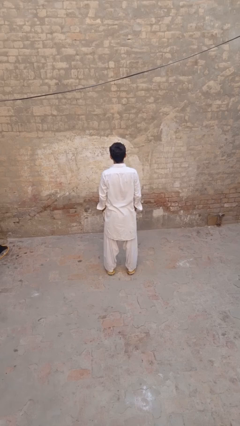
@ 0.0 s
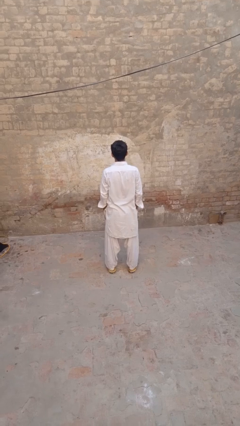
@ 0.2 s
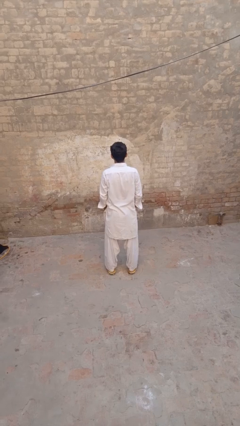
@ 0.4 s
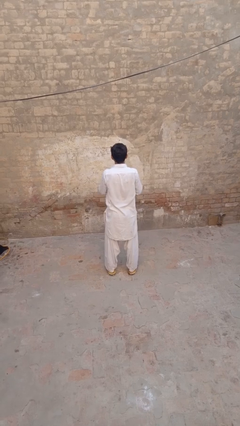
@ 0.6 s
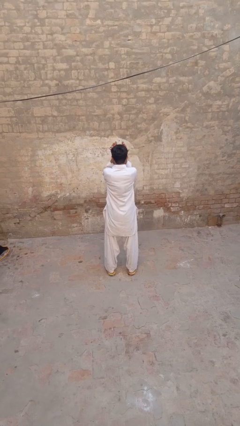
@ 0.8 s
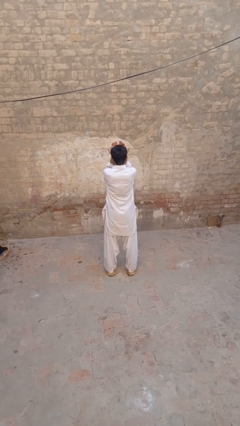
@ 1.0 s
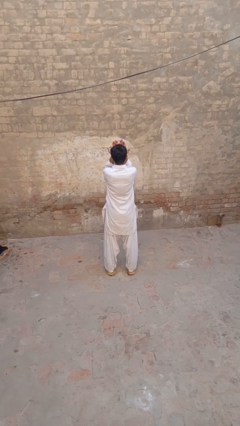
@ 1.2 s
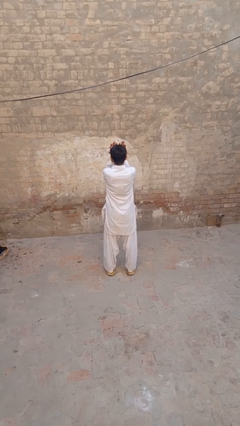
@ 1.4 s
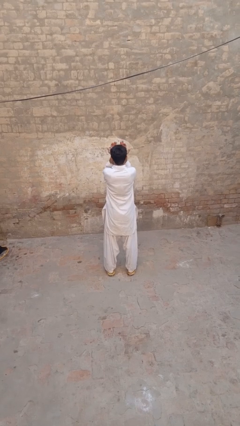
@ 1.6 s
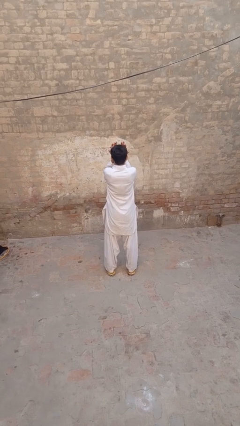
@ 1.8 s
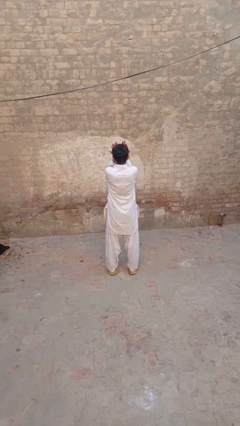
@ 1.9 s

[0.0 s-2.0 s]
person shades eyes

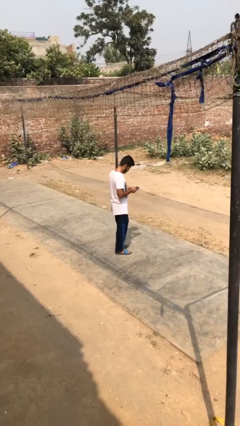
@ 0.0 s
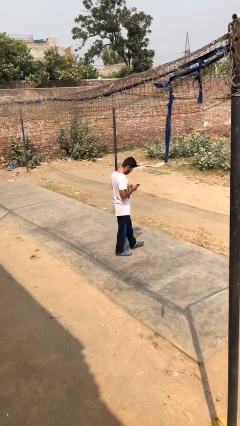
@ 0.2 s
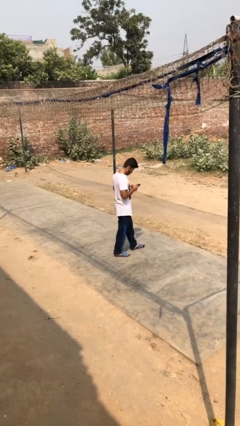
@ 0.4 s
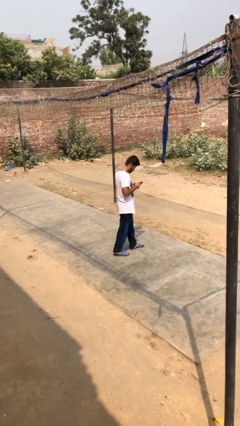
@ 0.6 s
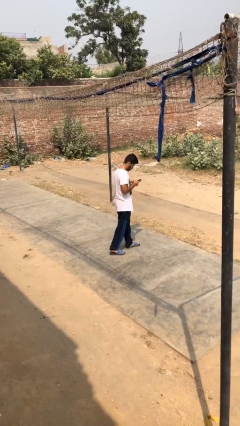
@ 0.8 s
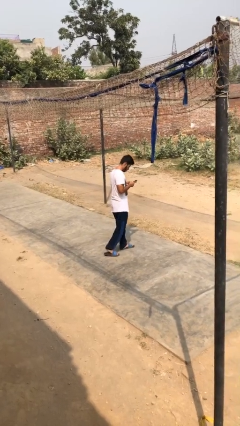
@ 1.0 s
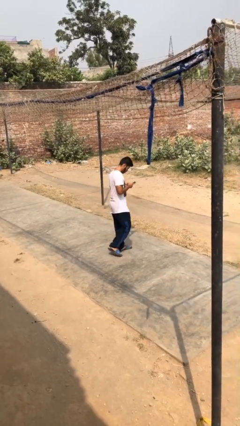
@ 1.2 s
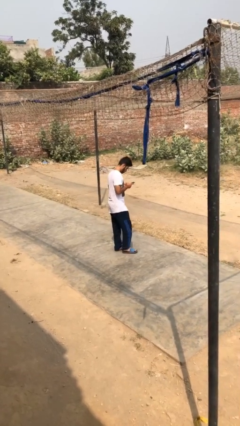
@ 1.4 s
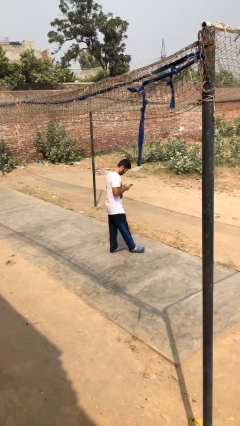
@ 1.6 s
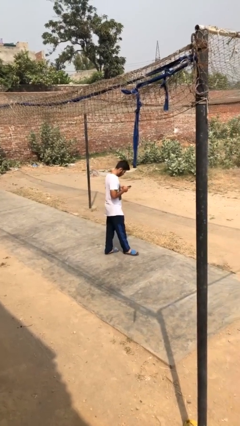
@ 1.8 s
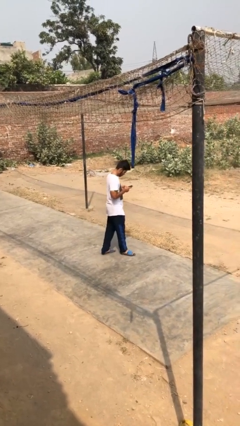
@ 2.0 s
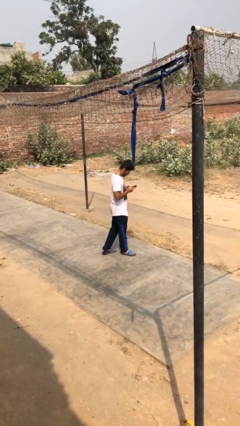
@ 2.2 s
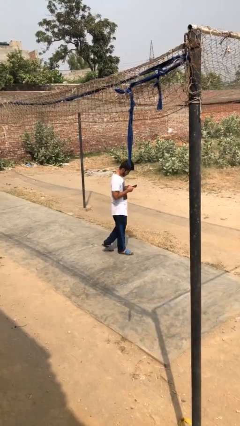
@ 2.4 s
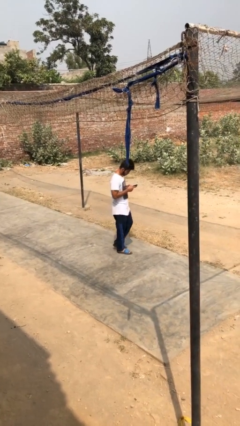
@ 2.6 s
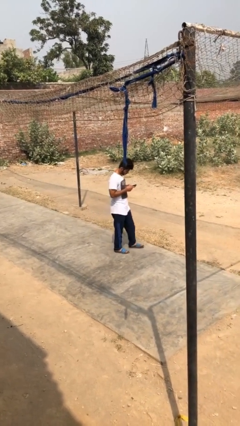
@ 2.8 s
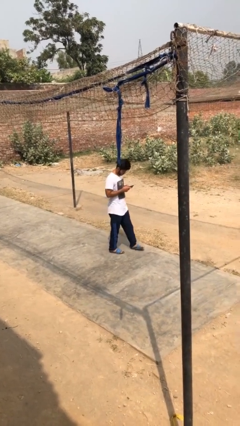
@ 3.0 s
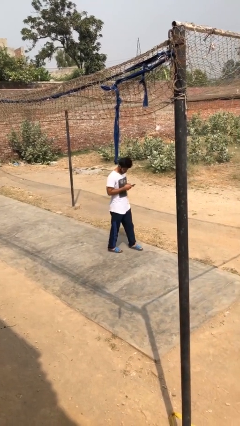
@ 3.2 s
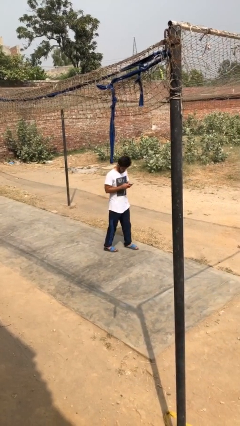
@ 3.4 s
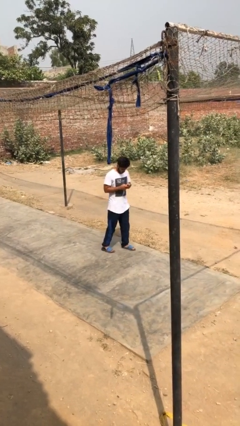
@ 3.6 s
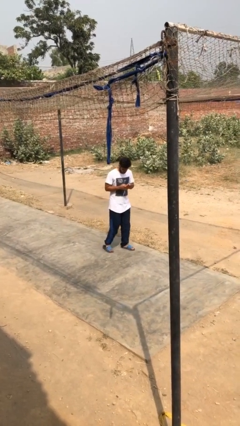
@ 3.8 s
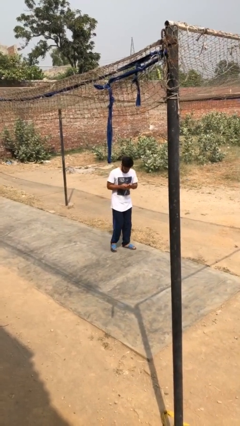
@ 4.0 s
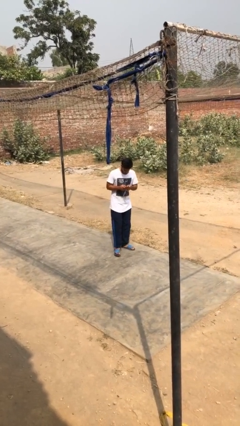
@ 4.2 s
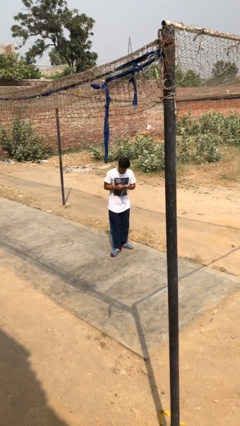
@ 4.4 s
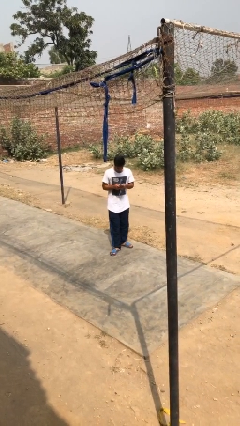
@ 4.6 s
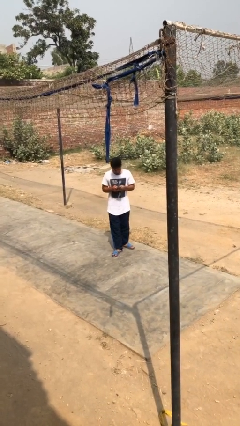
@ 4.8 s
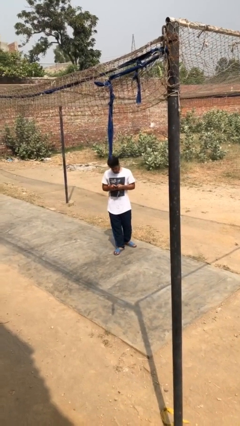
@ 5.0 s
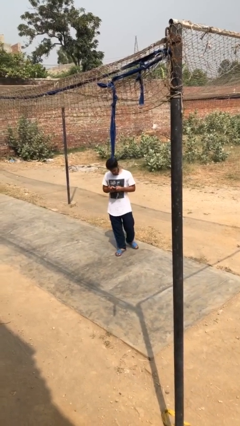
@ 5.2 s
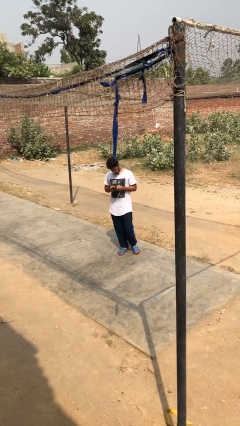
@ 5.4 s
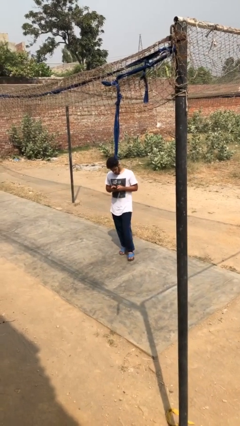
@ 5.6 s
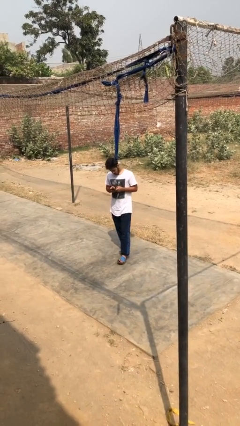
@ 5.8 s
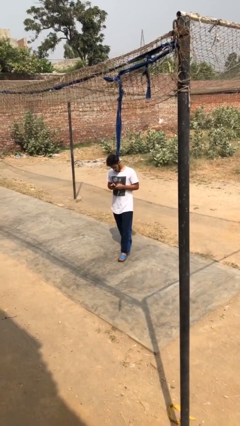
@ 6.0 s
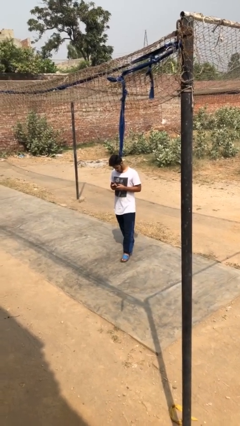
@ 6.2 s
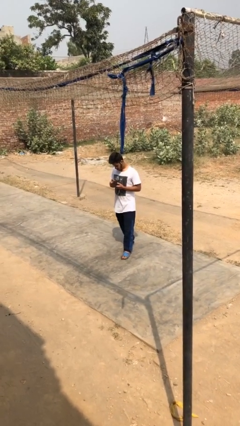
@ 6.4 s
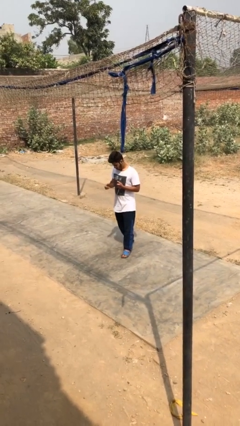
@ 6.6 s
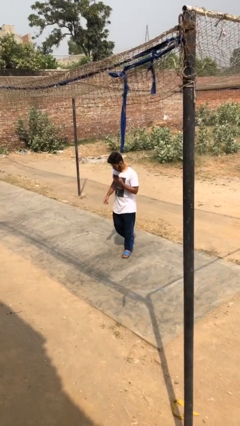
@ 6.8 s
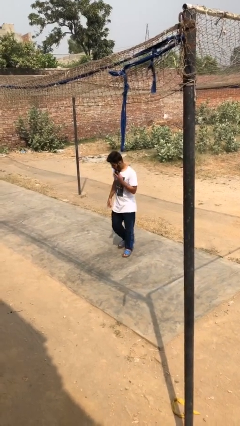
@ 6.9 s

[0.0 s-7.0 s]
person texts on phone

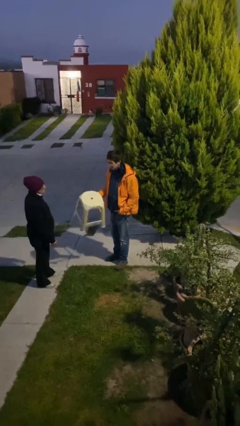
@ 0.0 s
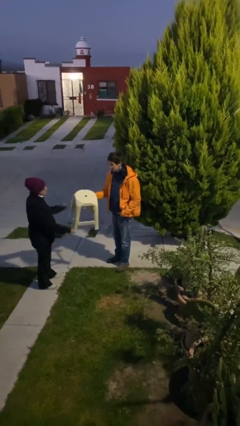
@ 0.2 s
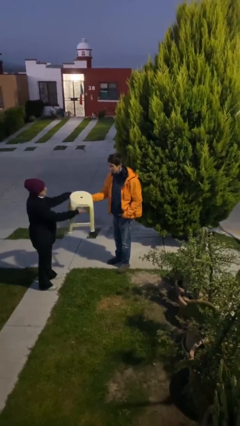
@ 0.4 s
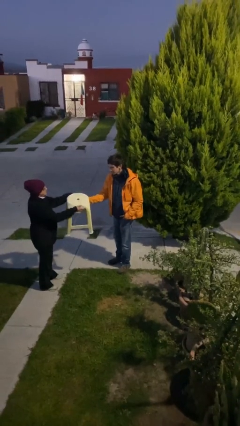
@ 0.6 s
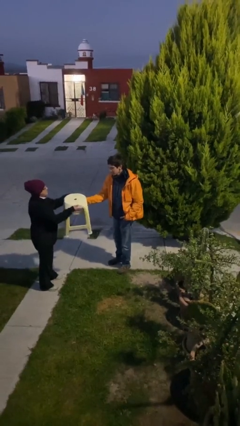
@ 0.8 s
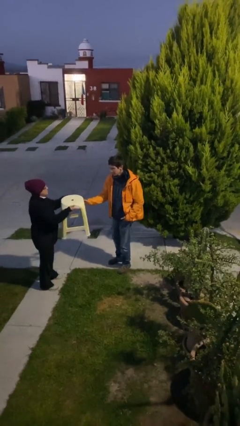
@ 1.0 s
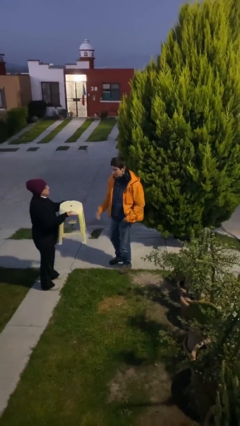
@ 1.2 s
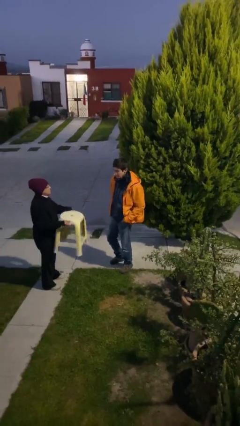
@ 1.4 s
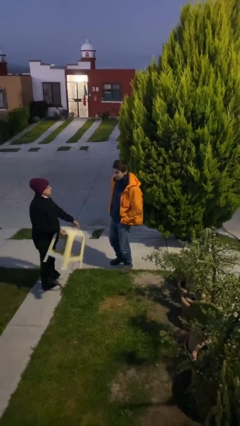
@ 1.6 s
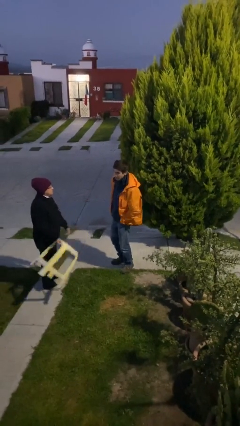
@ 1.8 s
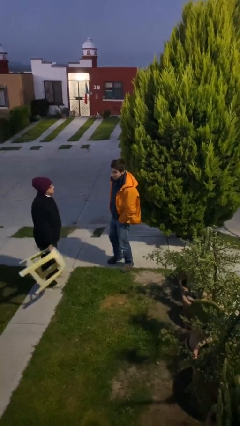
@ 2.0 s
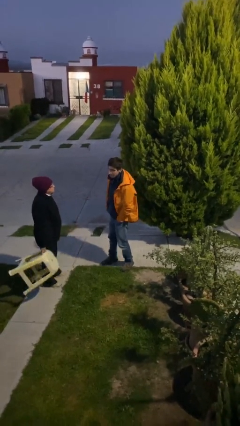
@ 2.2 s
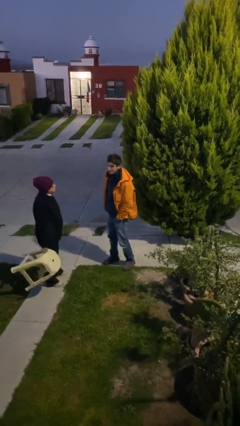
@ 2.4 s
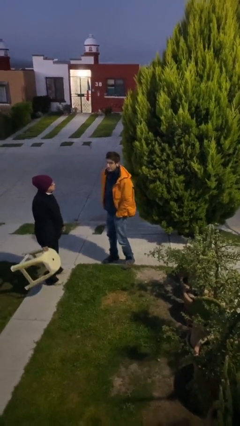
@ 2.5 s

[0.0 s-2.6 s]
person transfers object to person

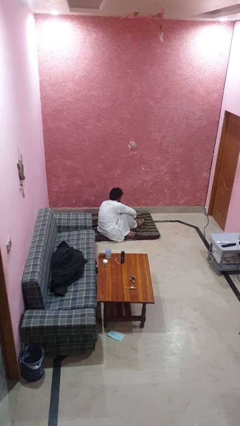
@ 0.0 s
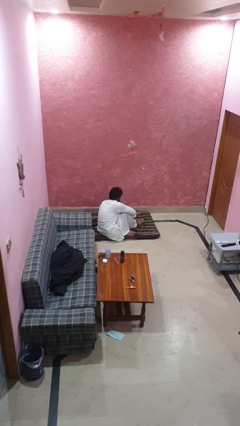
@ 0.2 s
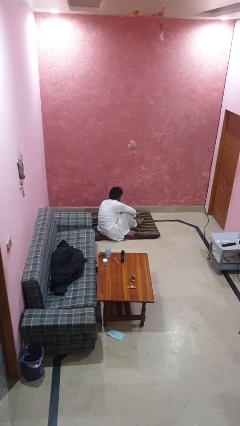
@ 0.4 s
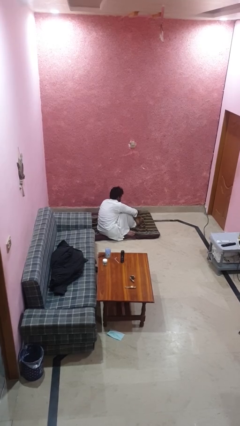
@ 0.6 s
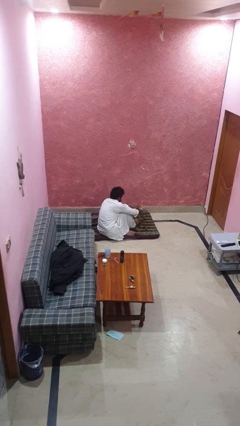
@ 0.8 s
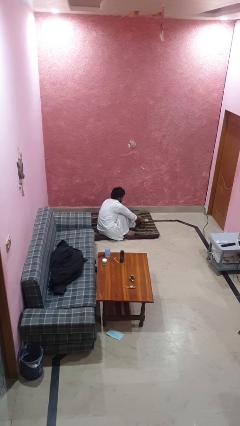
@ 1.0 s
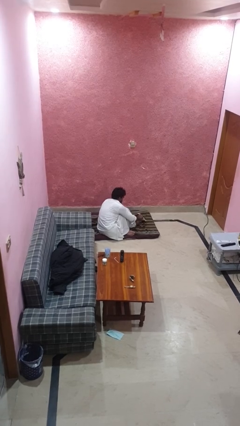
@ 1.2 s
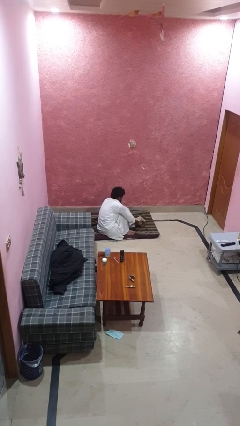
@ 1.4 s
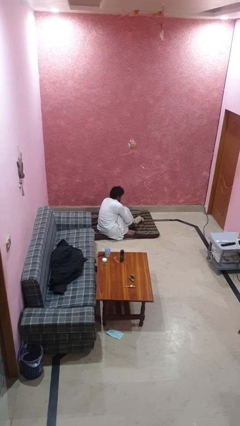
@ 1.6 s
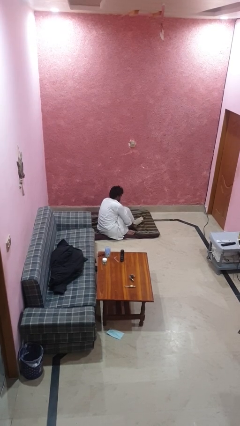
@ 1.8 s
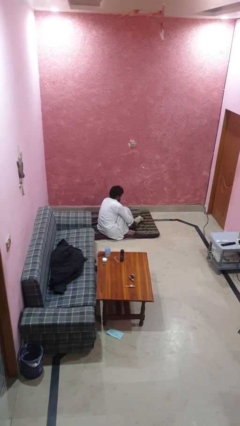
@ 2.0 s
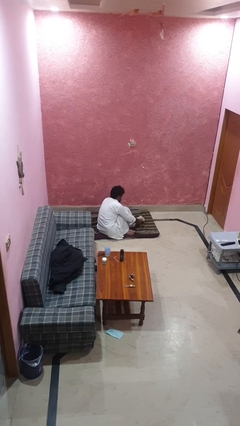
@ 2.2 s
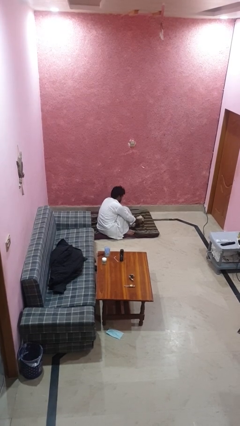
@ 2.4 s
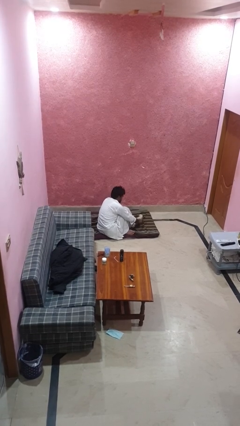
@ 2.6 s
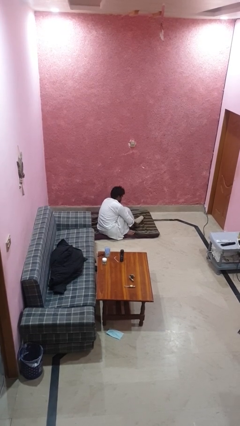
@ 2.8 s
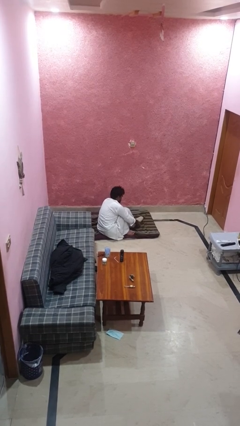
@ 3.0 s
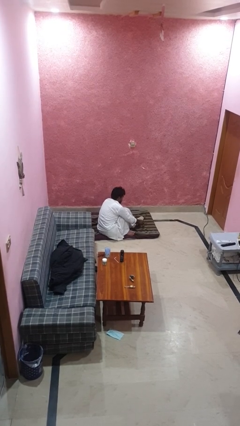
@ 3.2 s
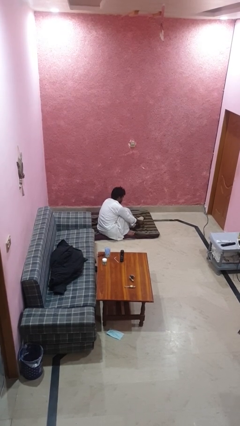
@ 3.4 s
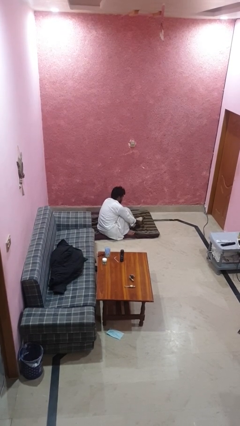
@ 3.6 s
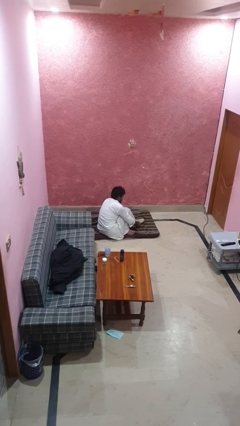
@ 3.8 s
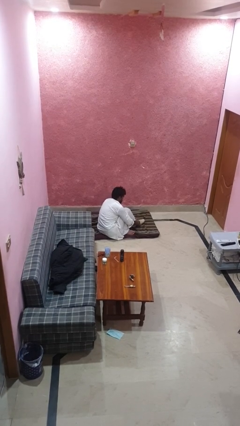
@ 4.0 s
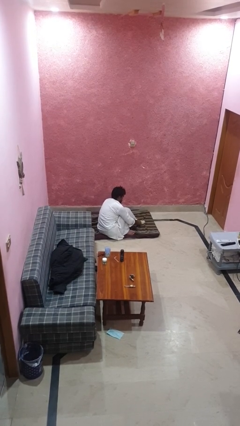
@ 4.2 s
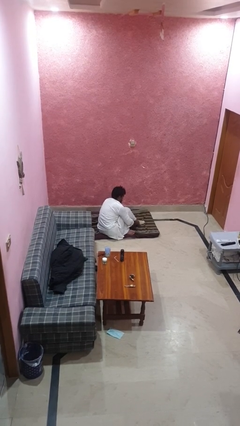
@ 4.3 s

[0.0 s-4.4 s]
person puts on socks

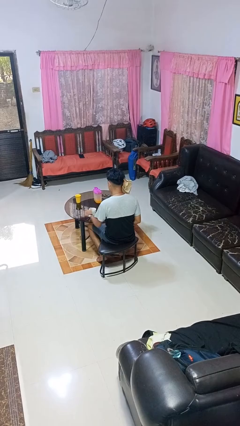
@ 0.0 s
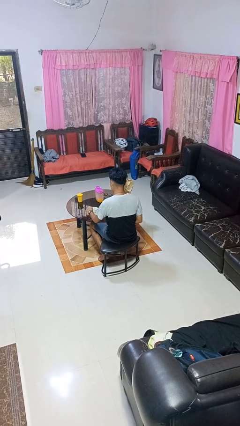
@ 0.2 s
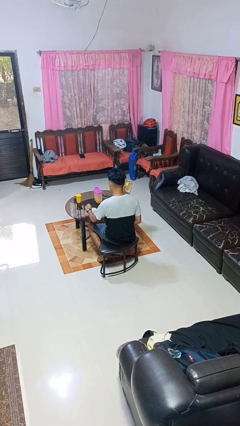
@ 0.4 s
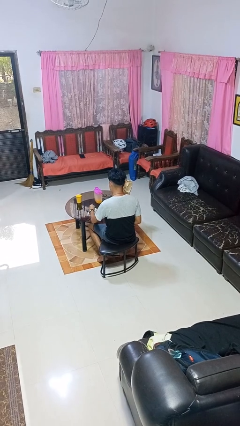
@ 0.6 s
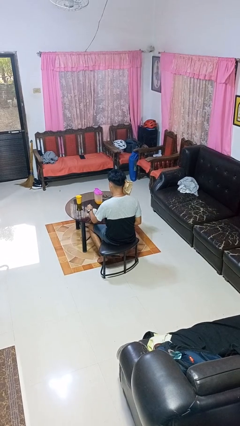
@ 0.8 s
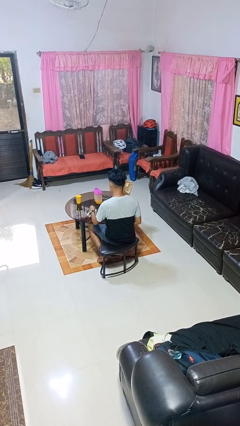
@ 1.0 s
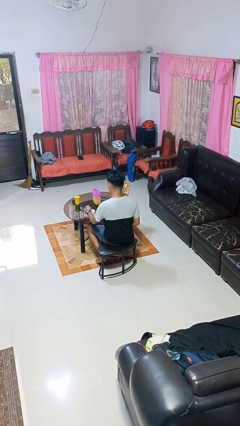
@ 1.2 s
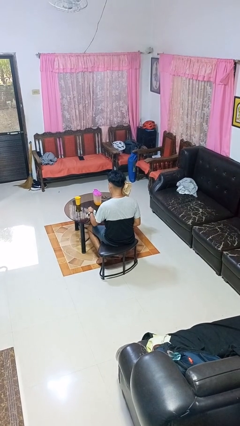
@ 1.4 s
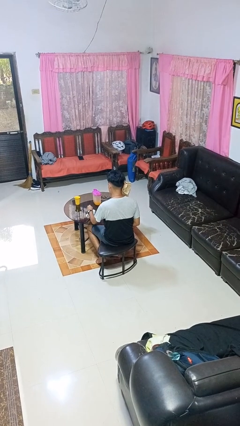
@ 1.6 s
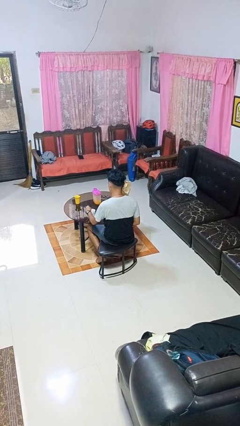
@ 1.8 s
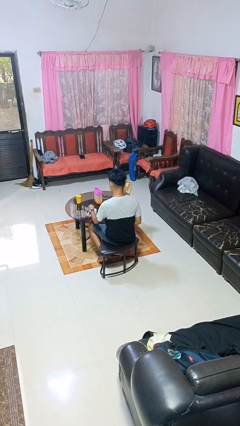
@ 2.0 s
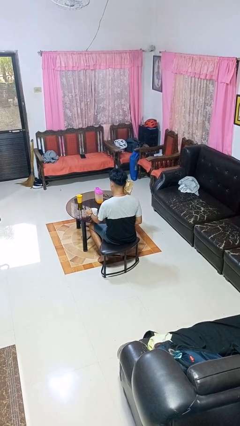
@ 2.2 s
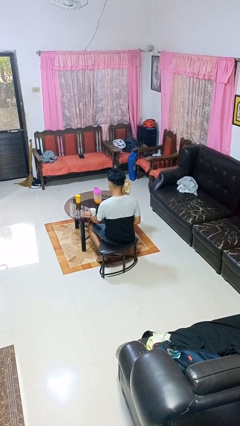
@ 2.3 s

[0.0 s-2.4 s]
person stirs mug
